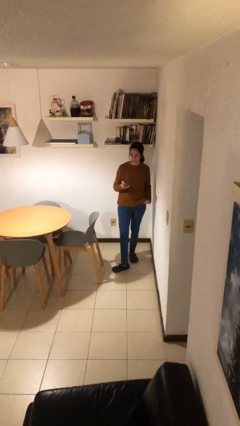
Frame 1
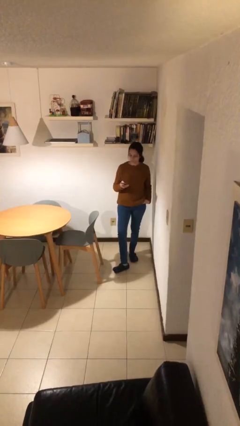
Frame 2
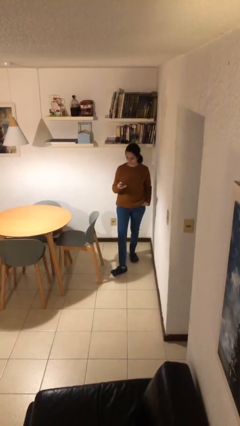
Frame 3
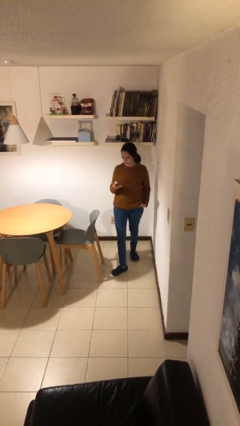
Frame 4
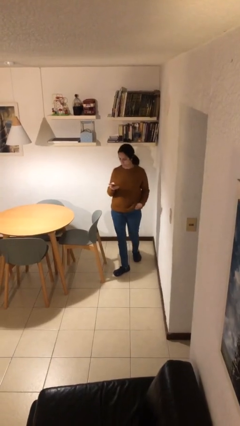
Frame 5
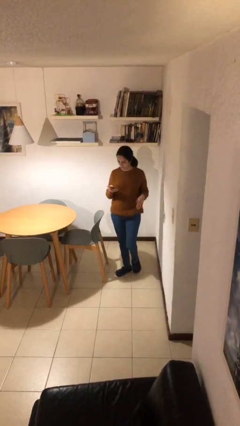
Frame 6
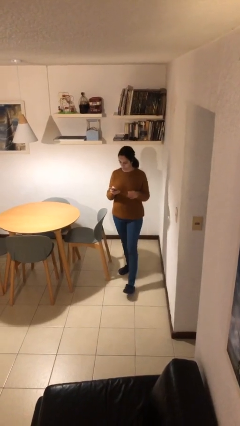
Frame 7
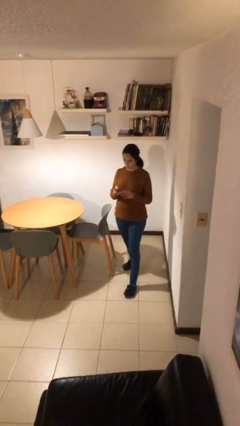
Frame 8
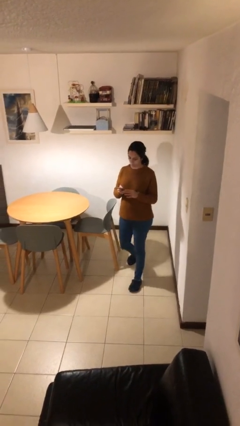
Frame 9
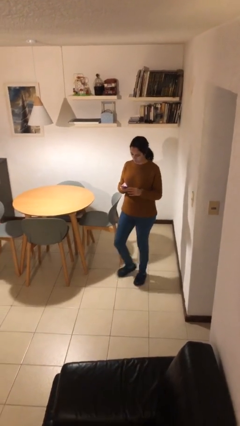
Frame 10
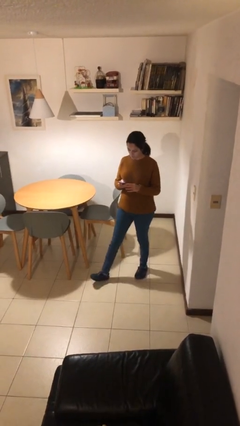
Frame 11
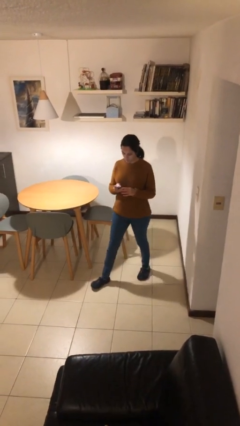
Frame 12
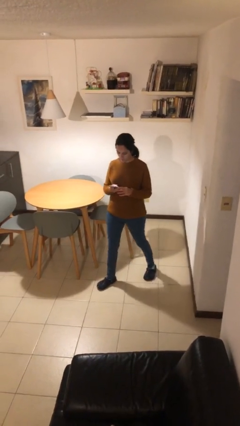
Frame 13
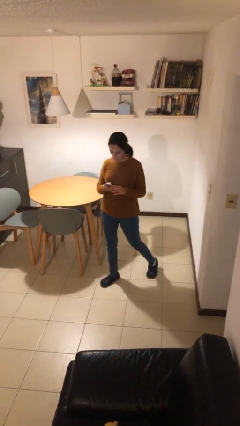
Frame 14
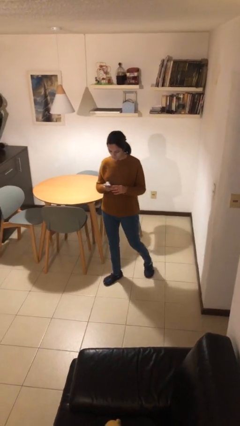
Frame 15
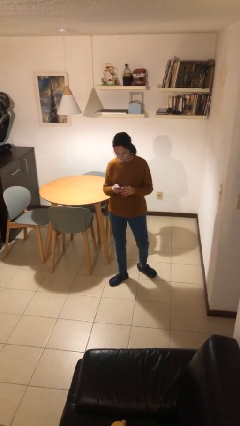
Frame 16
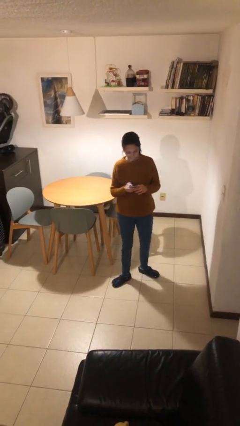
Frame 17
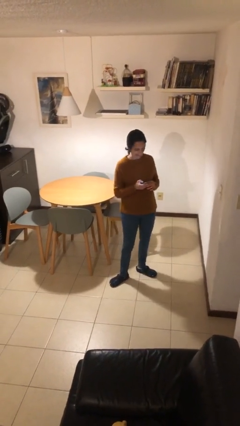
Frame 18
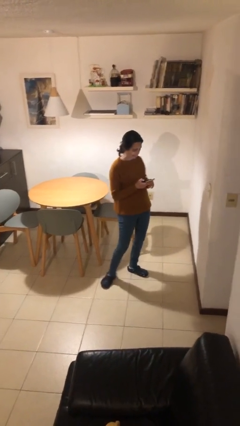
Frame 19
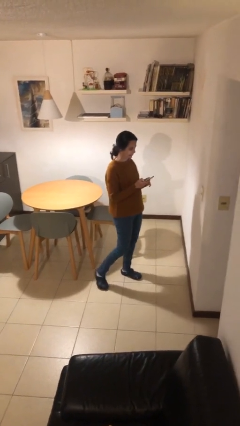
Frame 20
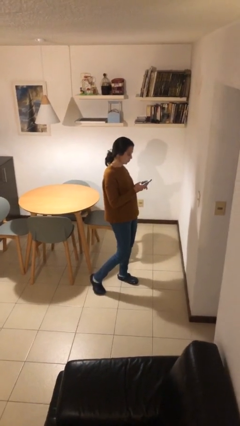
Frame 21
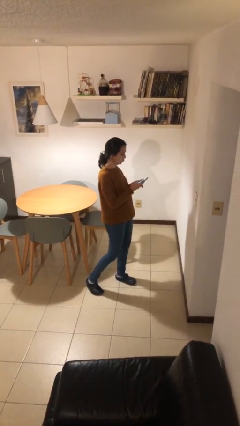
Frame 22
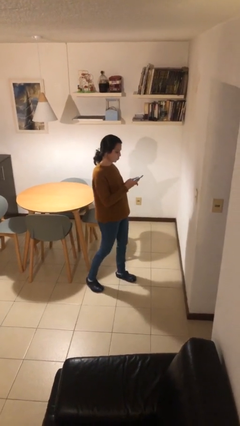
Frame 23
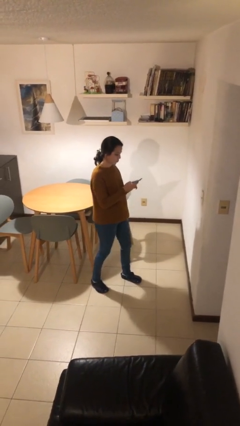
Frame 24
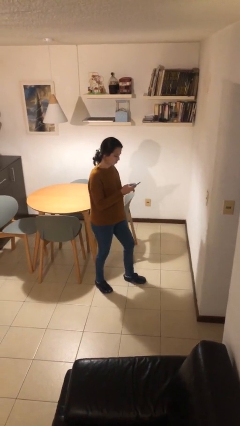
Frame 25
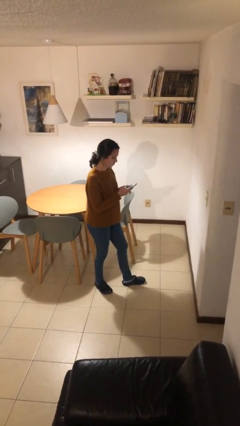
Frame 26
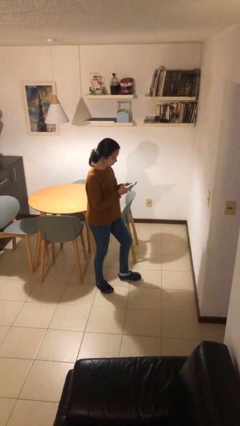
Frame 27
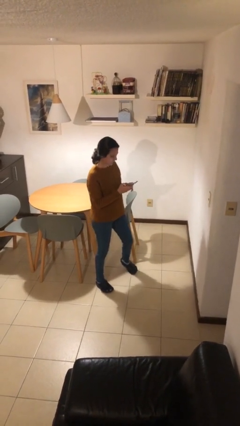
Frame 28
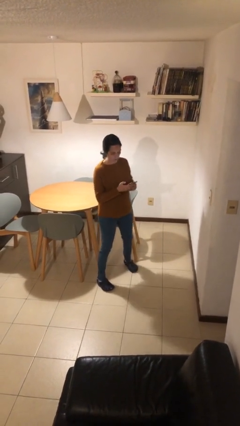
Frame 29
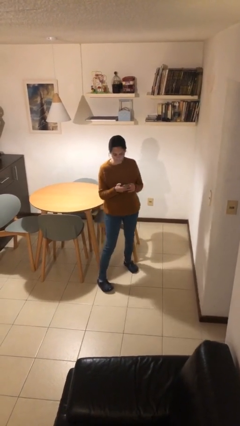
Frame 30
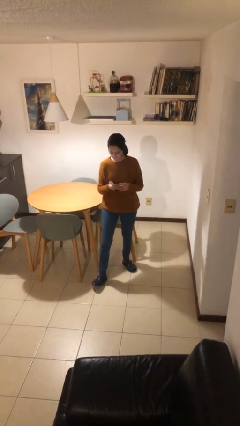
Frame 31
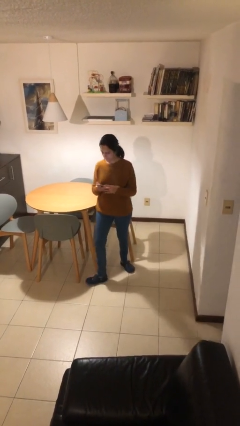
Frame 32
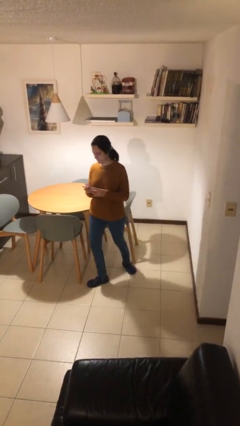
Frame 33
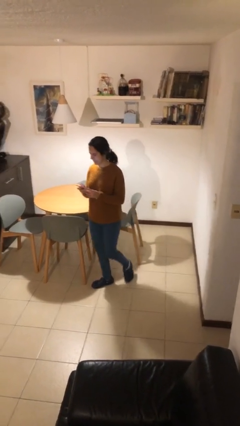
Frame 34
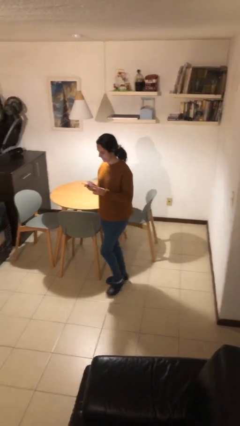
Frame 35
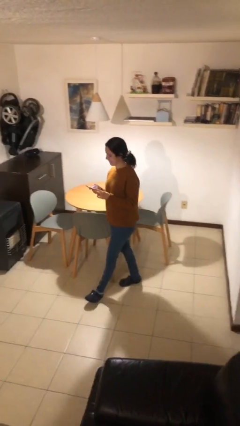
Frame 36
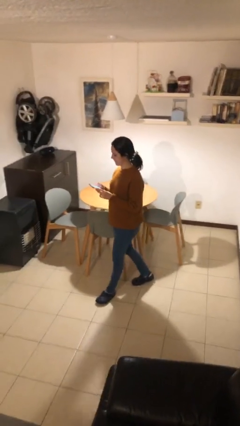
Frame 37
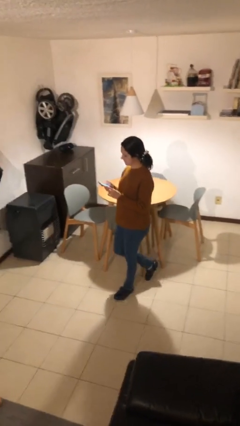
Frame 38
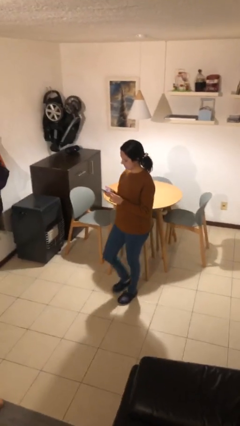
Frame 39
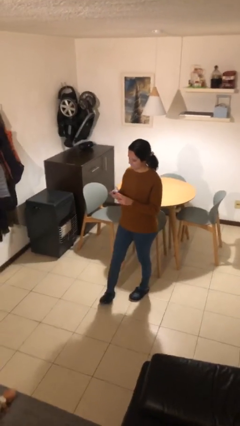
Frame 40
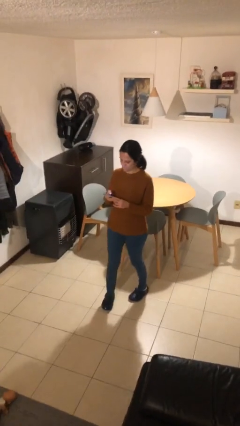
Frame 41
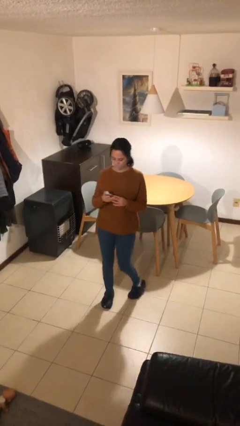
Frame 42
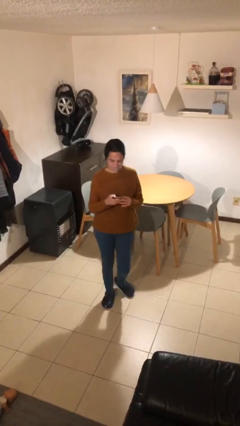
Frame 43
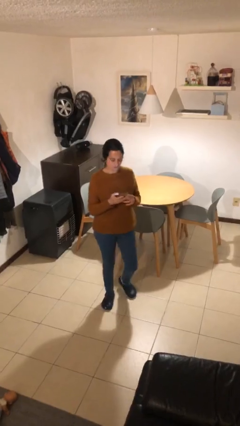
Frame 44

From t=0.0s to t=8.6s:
person texts on phone

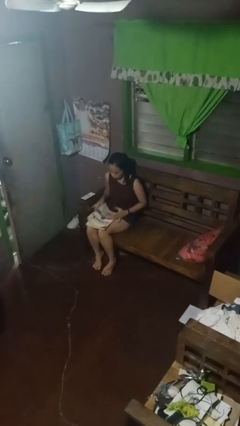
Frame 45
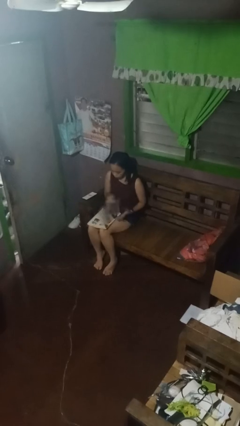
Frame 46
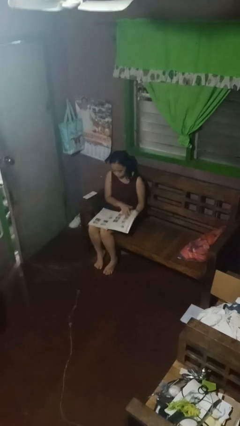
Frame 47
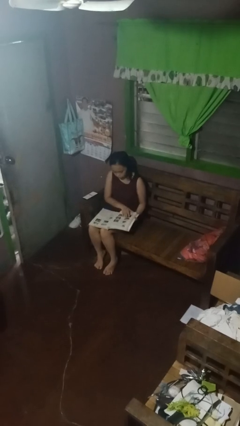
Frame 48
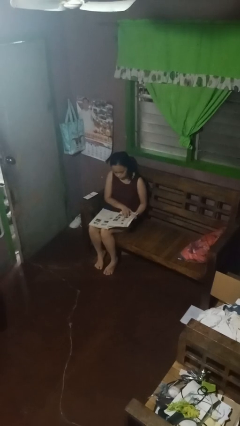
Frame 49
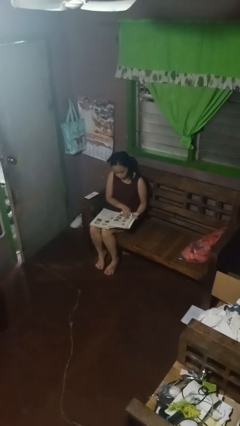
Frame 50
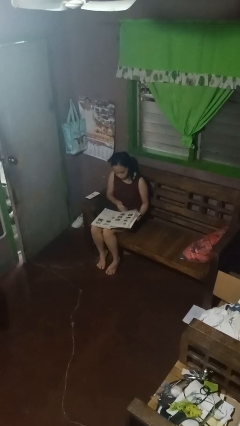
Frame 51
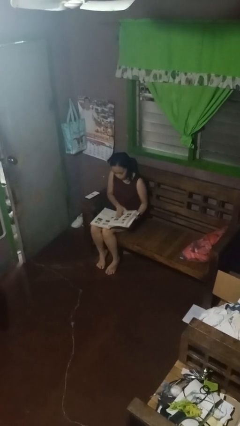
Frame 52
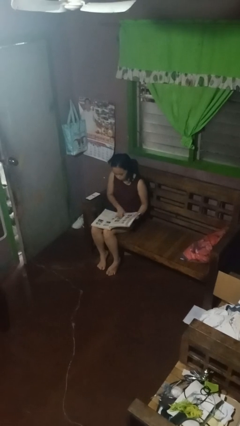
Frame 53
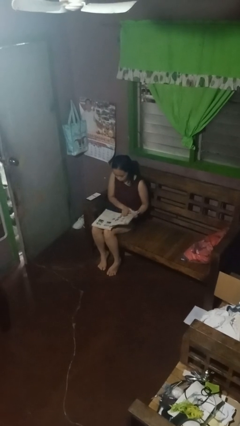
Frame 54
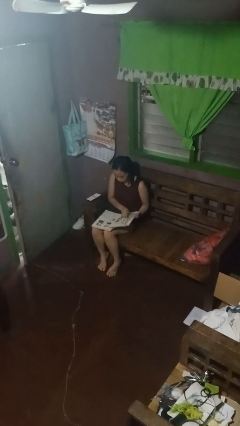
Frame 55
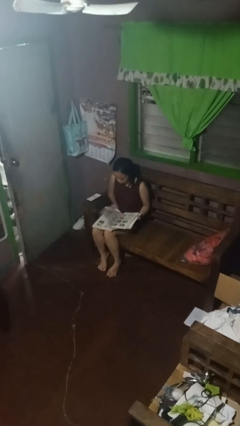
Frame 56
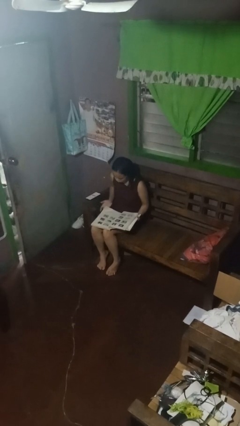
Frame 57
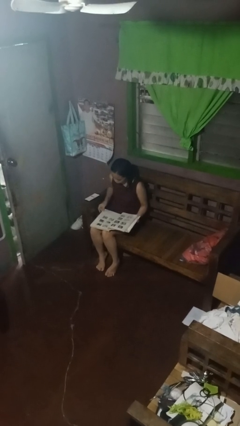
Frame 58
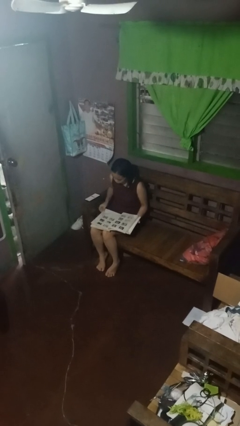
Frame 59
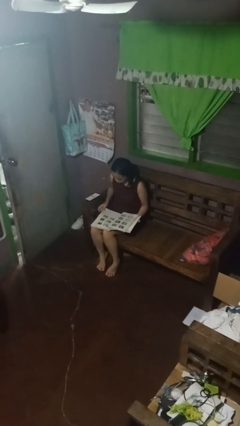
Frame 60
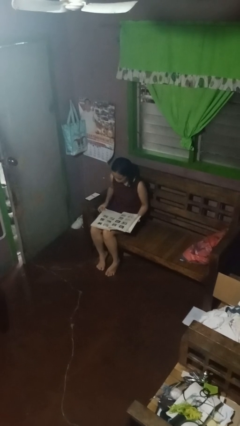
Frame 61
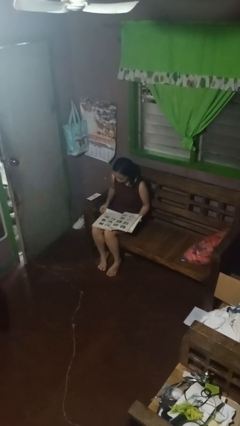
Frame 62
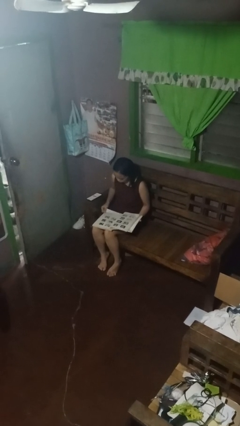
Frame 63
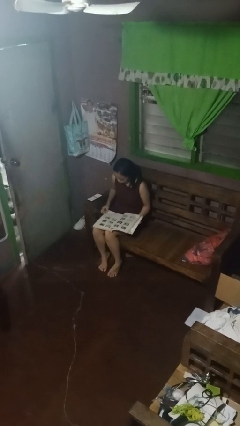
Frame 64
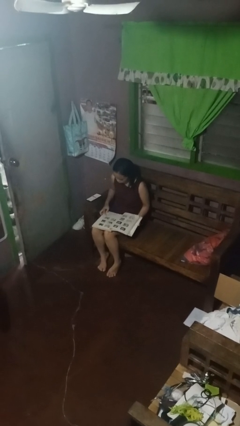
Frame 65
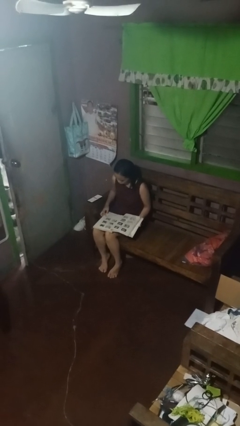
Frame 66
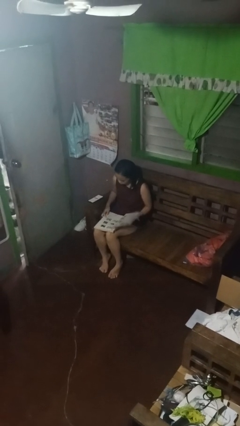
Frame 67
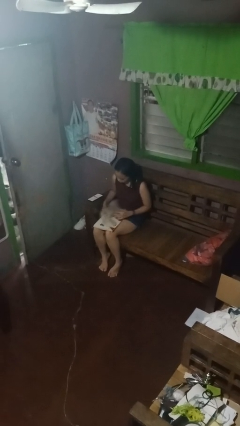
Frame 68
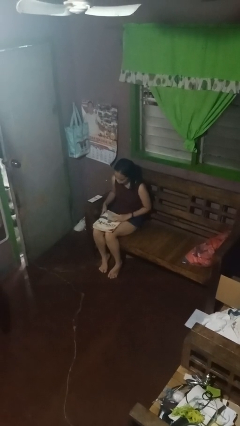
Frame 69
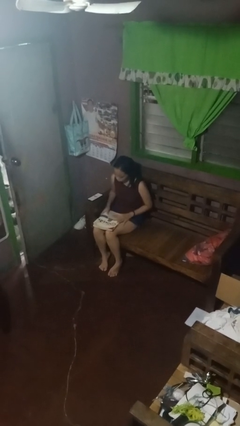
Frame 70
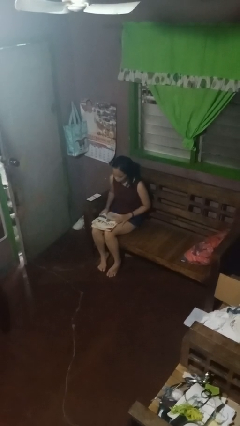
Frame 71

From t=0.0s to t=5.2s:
person reads book

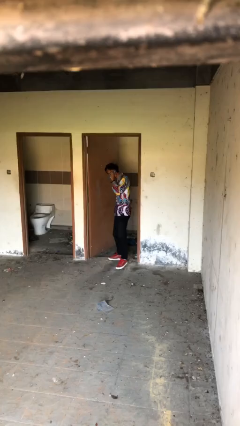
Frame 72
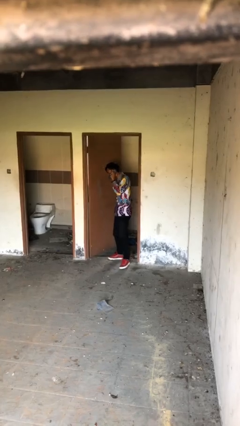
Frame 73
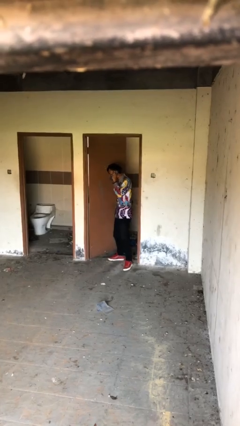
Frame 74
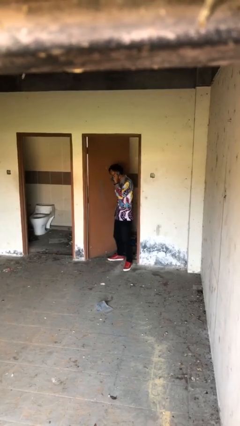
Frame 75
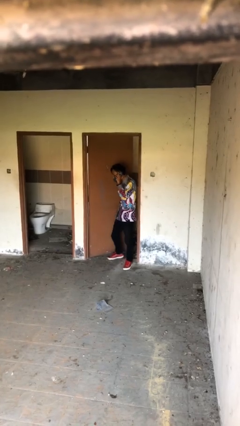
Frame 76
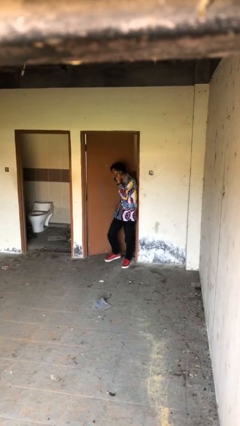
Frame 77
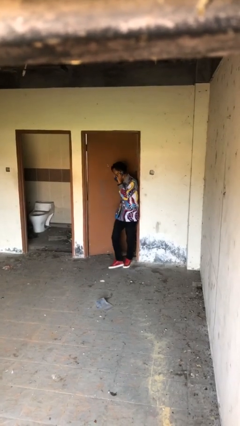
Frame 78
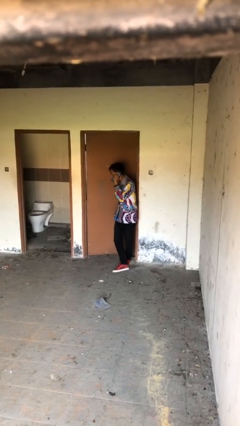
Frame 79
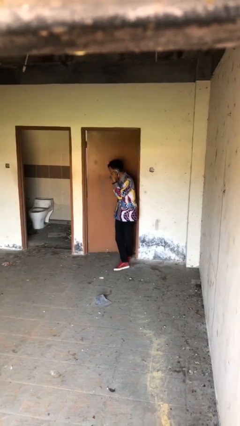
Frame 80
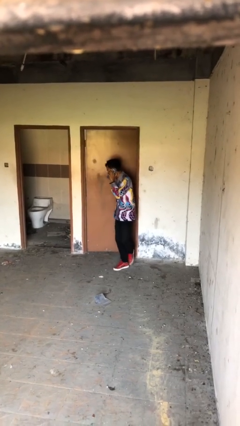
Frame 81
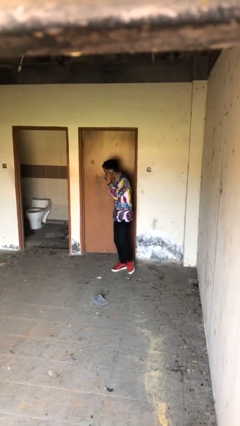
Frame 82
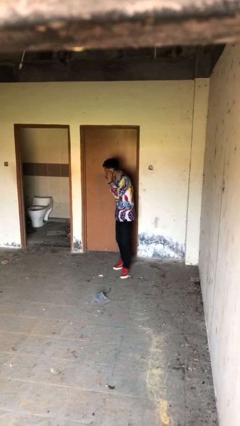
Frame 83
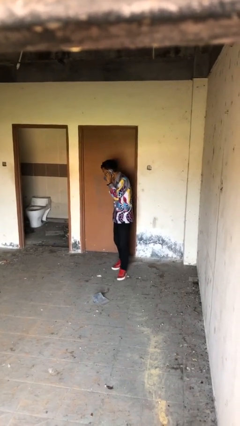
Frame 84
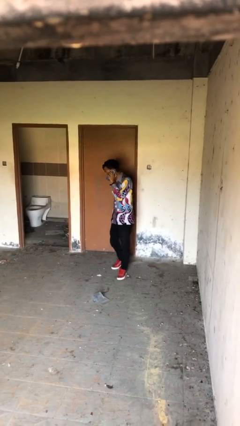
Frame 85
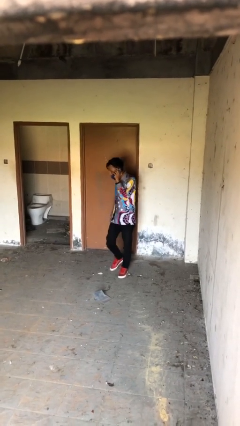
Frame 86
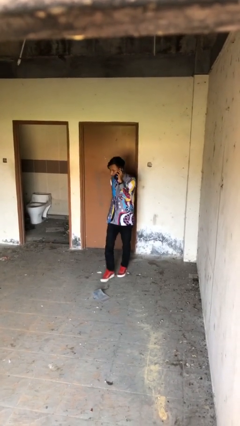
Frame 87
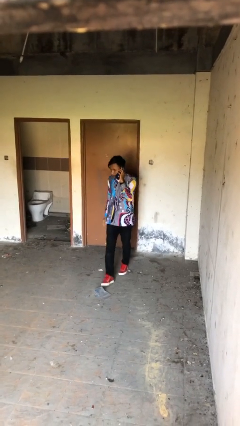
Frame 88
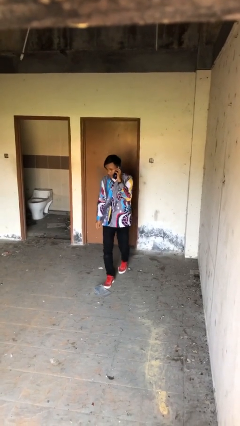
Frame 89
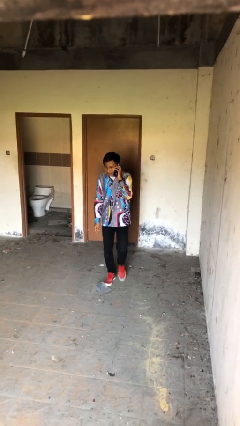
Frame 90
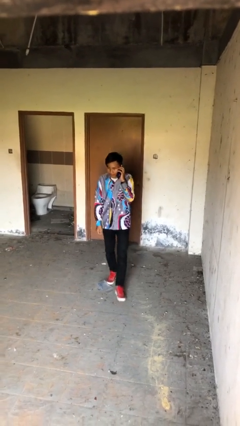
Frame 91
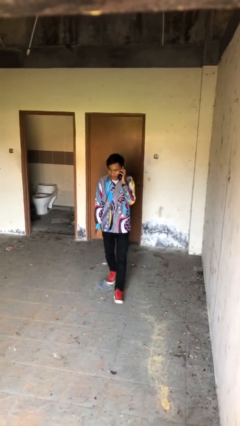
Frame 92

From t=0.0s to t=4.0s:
person closes facility door

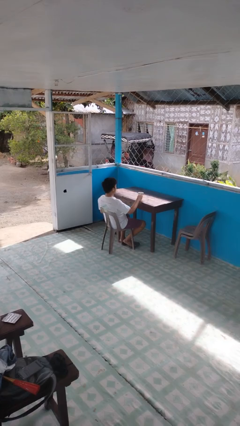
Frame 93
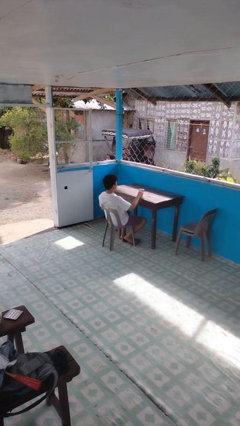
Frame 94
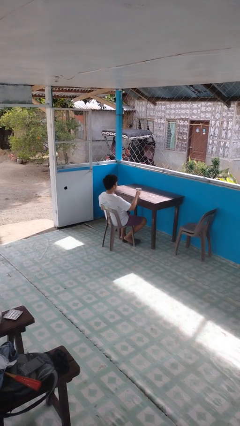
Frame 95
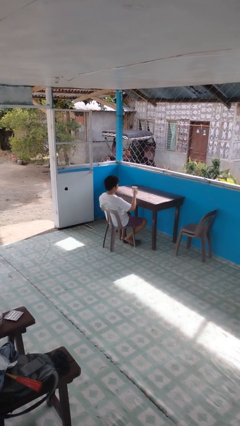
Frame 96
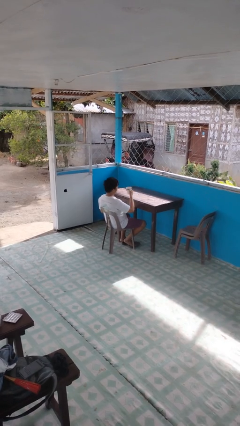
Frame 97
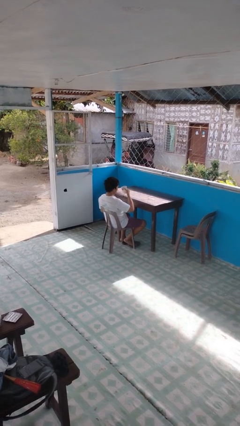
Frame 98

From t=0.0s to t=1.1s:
person picks up object from table
